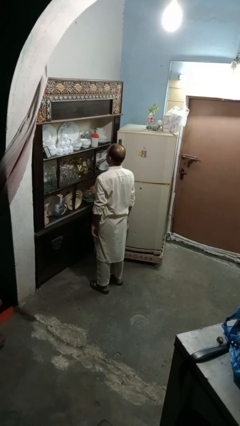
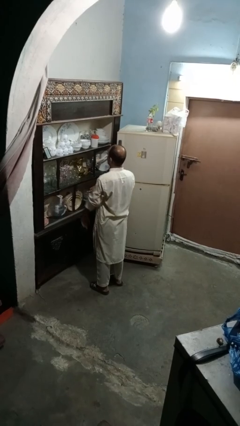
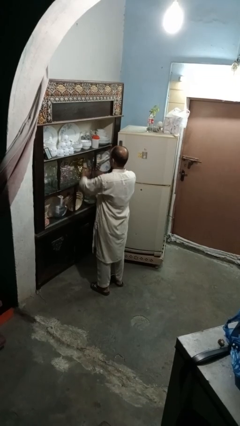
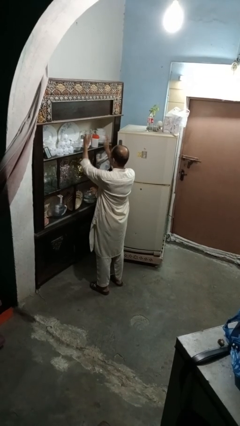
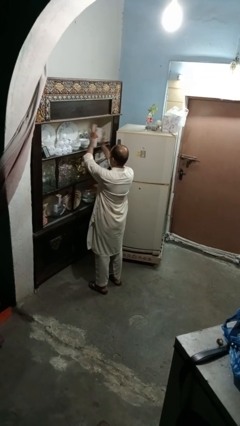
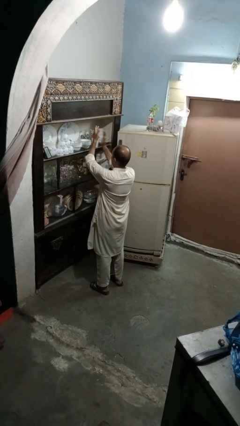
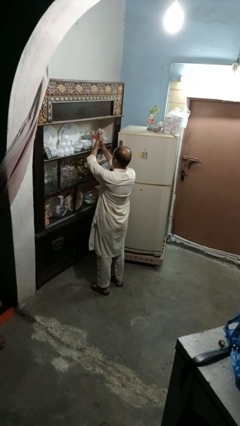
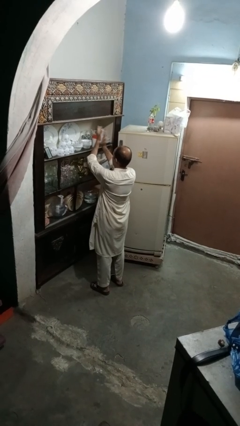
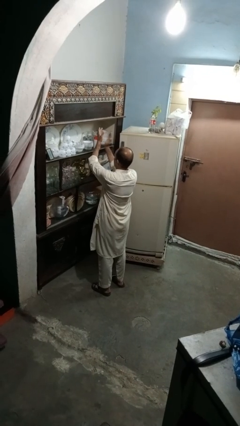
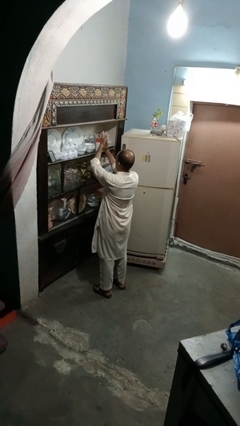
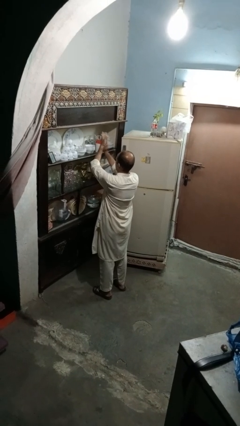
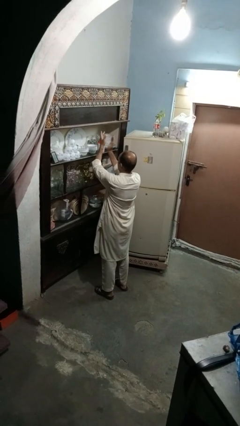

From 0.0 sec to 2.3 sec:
person claps hands

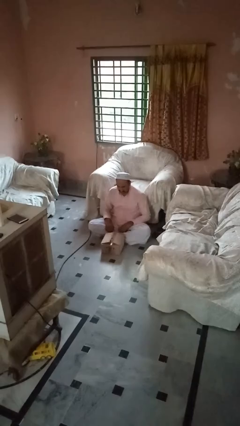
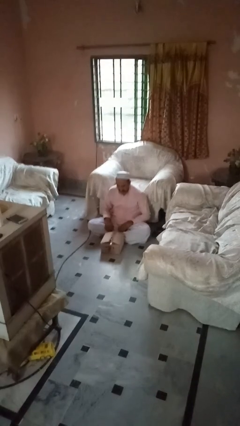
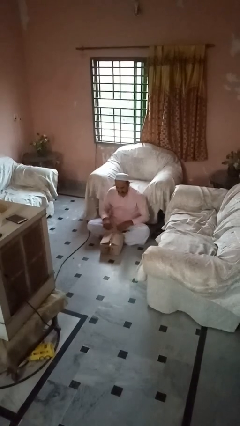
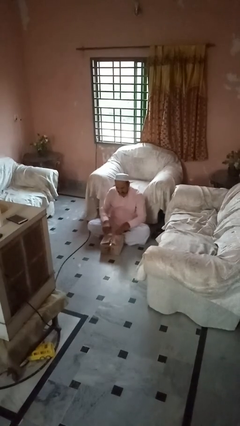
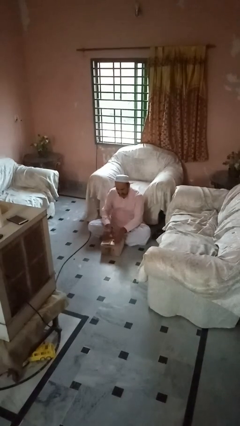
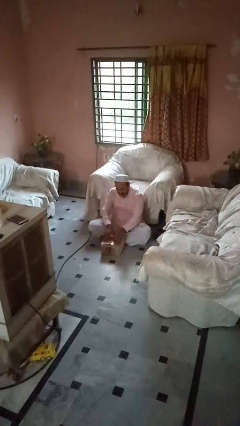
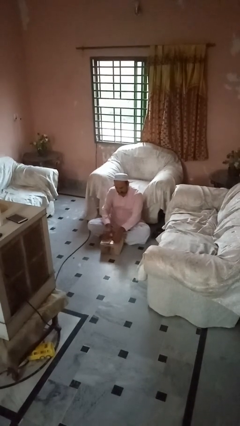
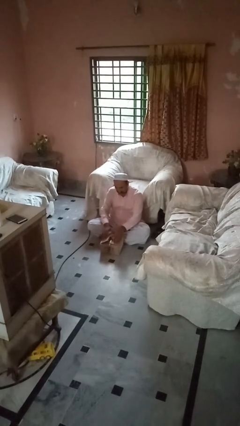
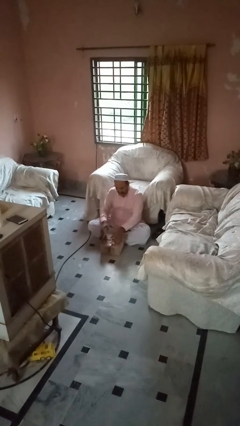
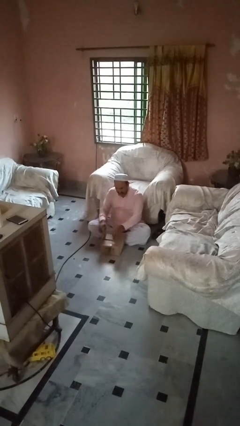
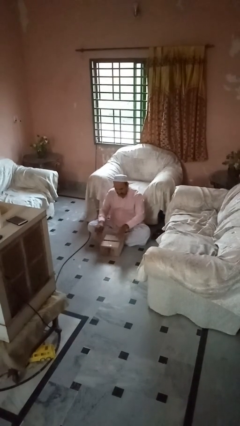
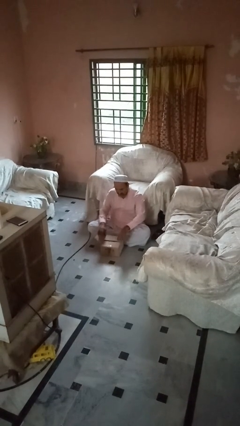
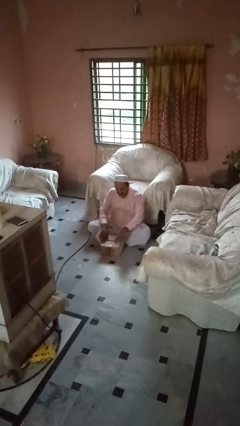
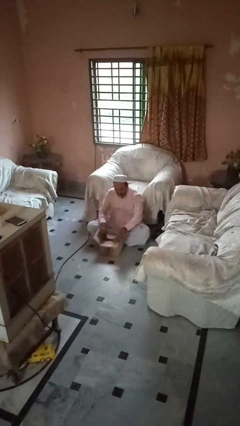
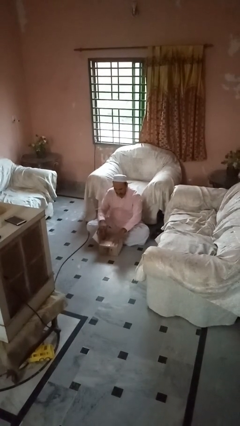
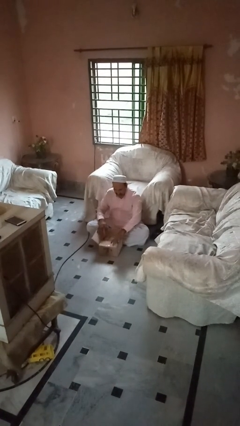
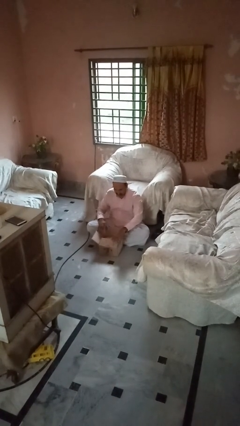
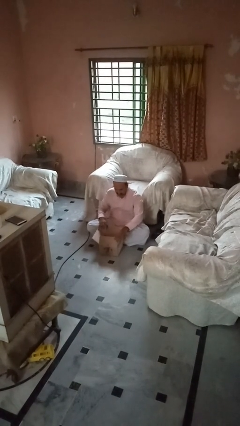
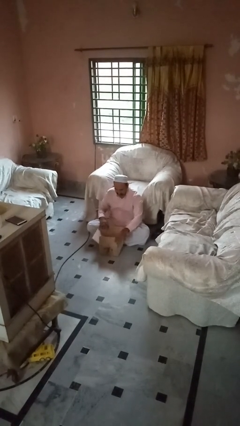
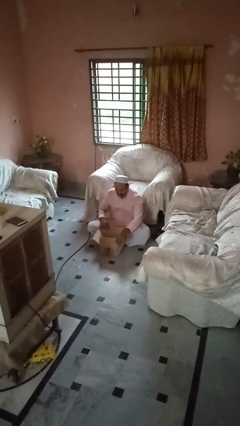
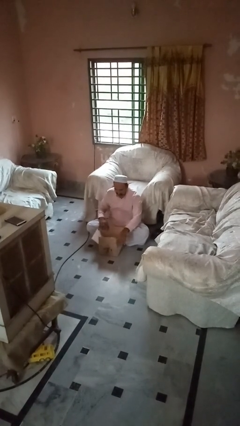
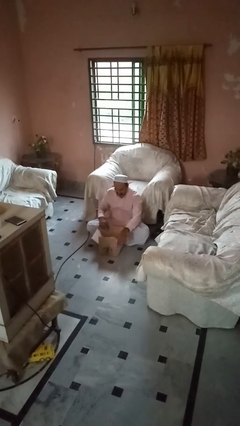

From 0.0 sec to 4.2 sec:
person opens box

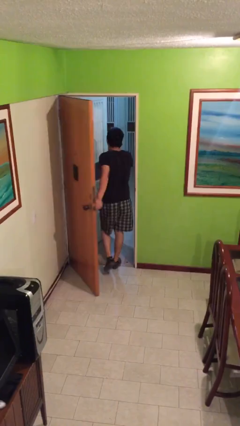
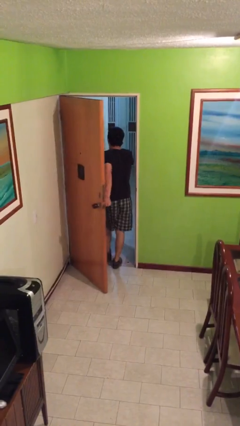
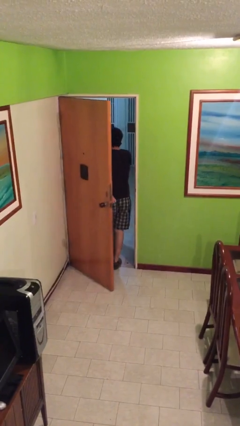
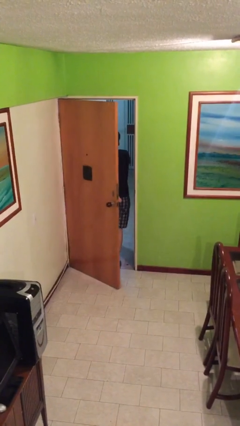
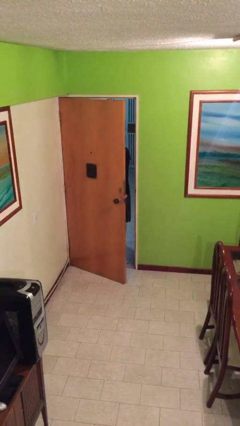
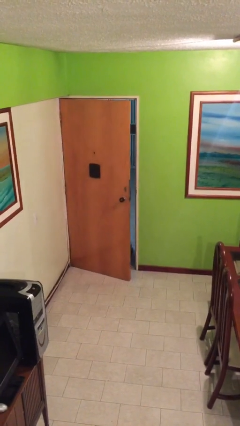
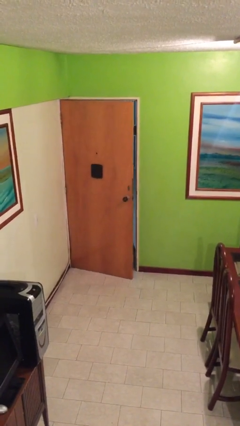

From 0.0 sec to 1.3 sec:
person closes facility door

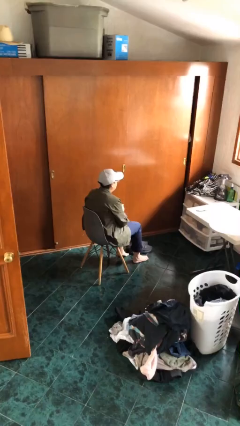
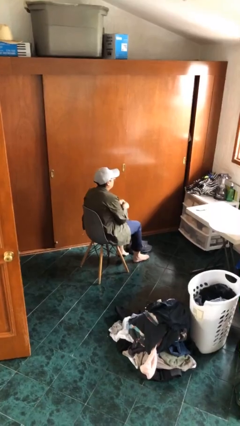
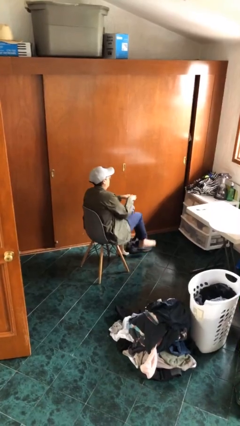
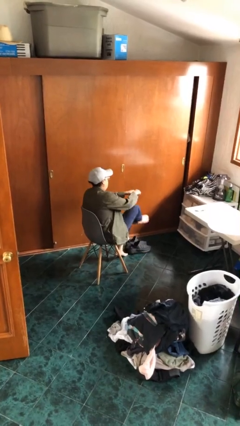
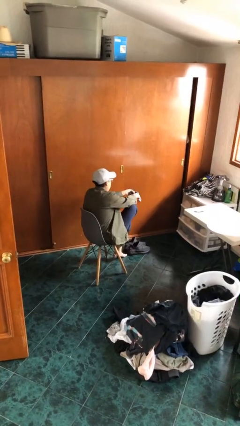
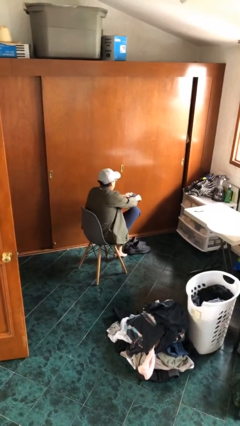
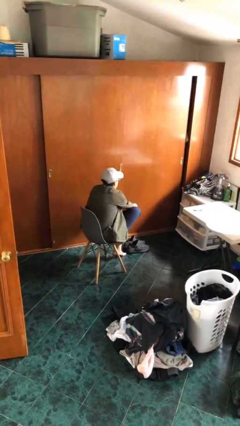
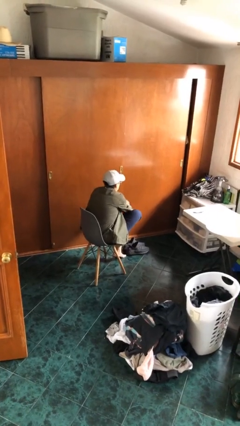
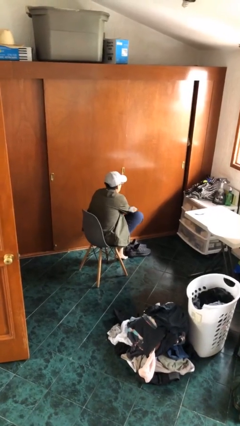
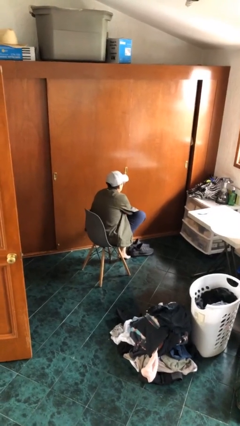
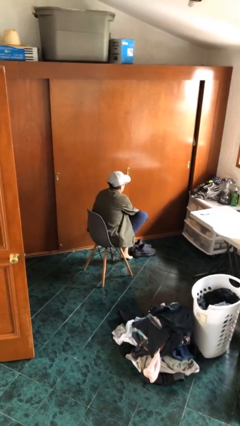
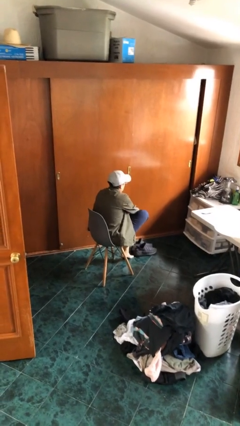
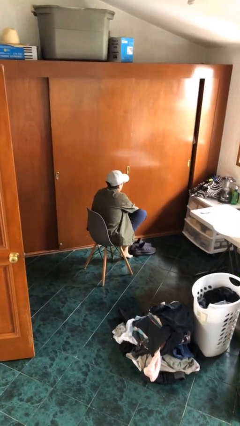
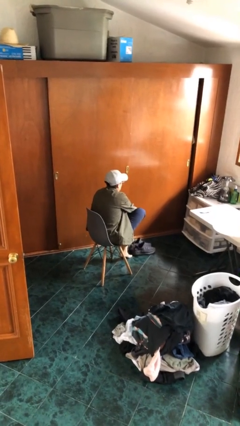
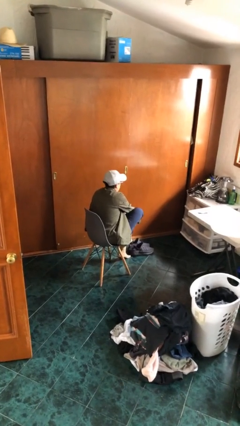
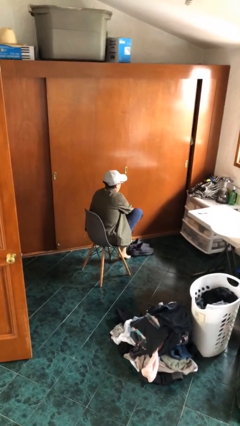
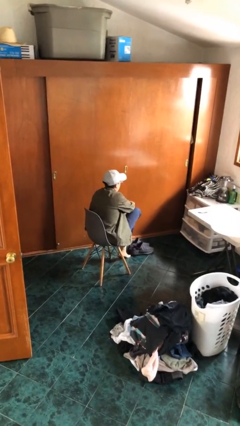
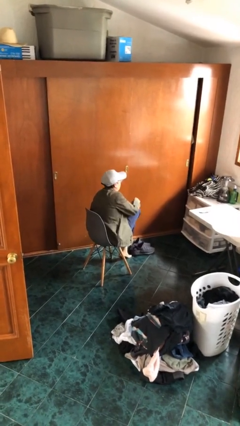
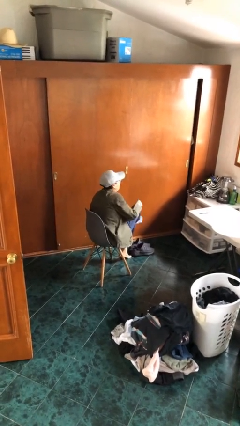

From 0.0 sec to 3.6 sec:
person puts on socks

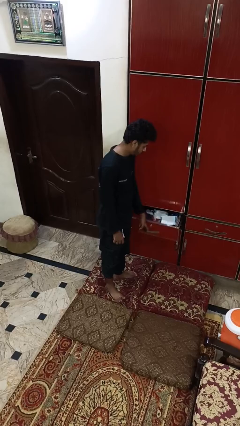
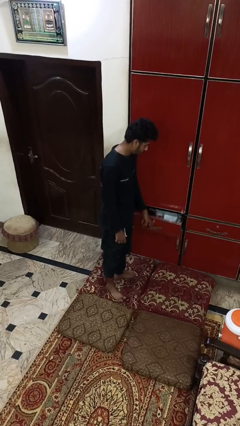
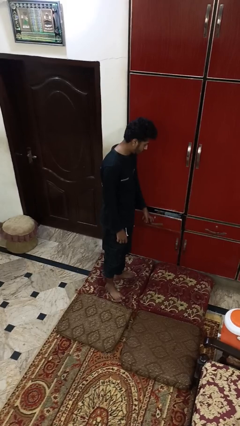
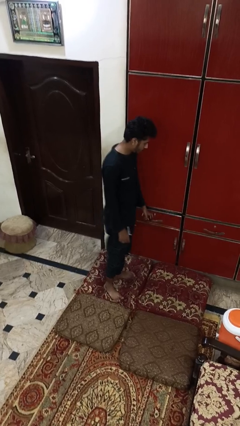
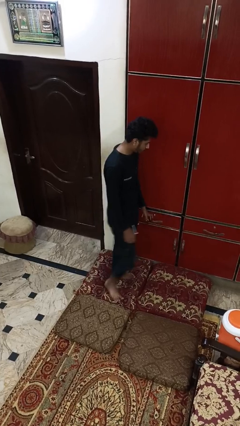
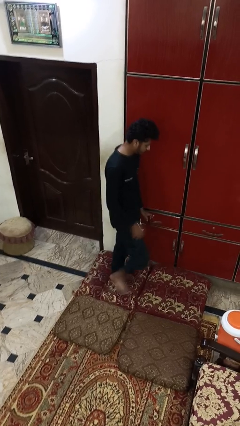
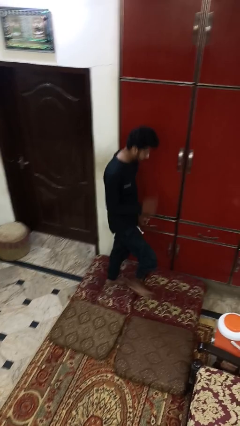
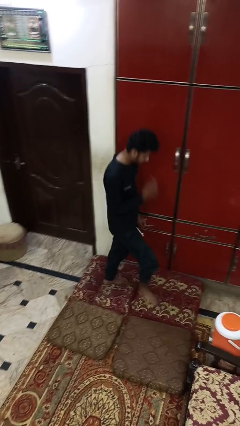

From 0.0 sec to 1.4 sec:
person closes dresser drawer

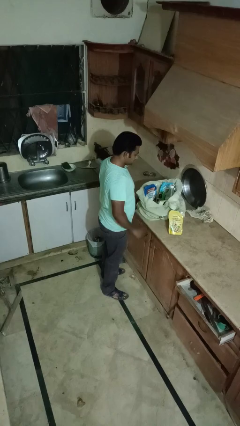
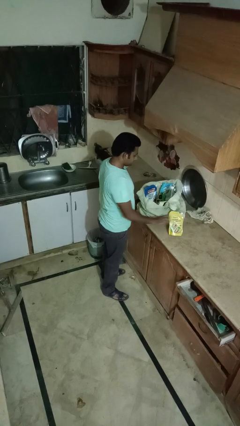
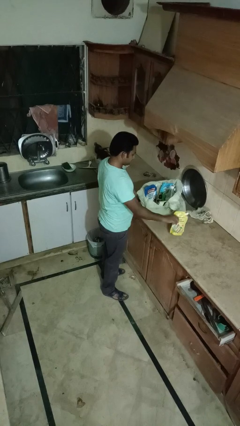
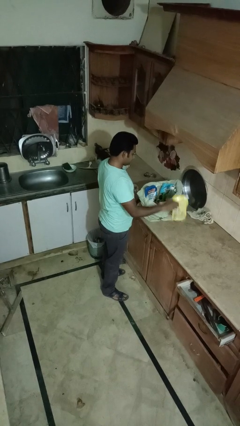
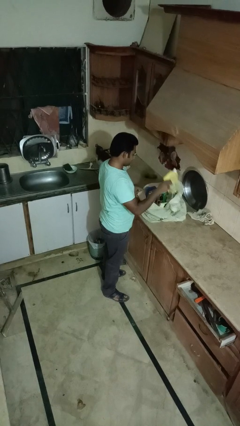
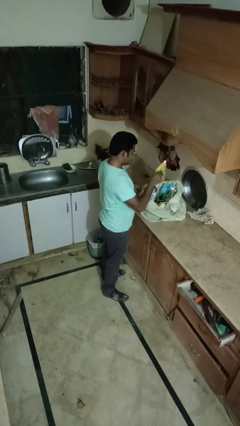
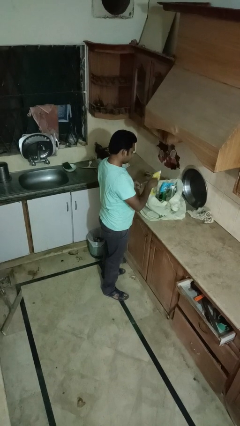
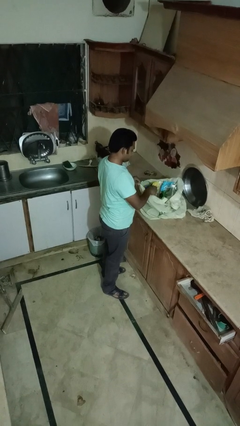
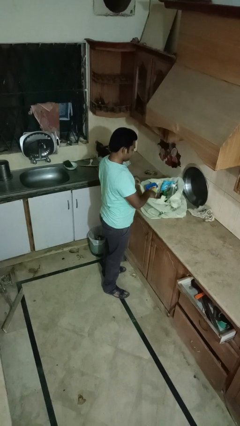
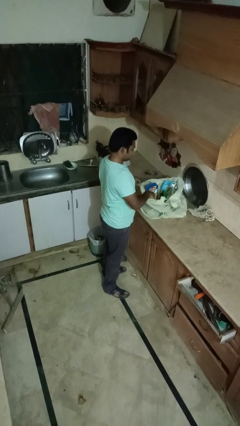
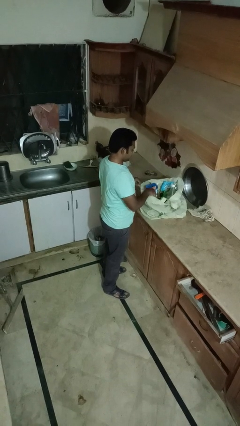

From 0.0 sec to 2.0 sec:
person puts object into bag

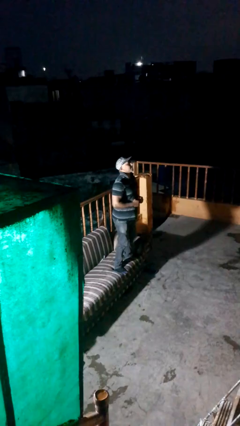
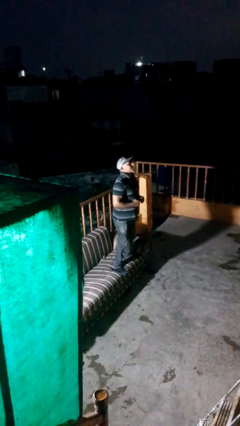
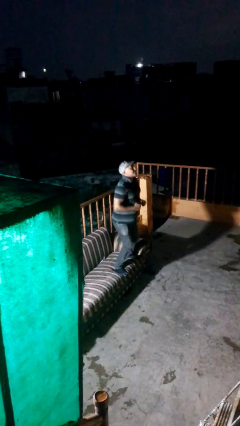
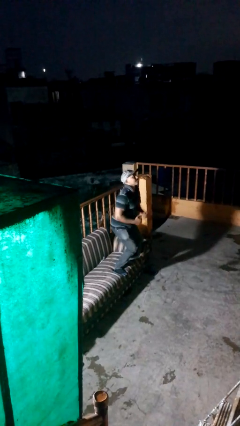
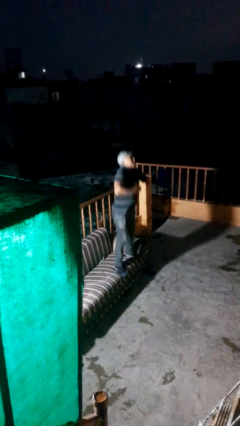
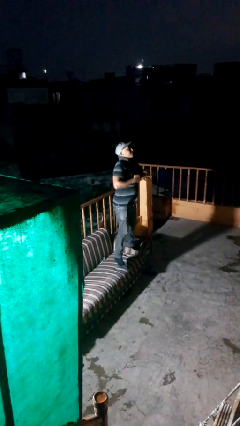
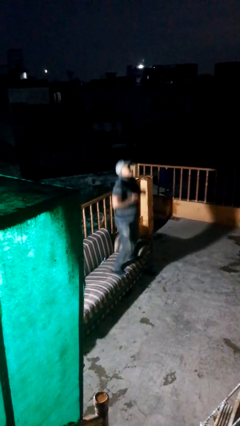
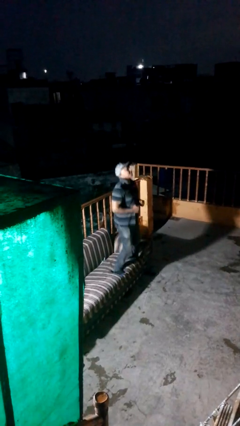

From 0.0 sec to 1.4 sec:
person jumps on couch

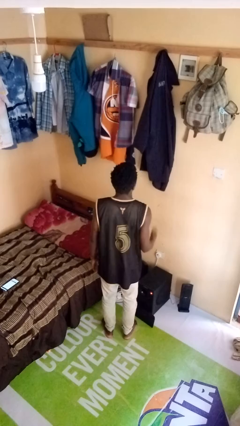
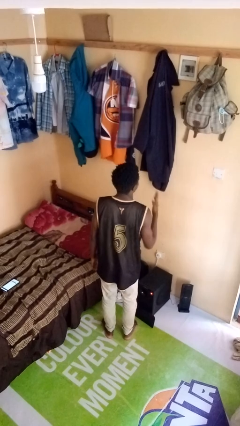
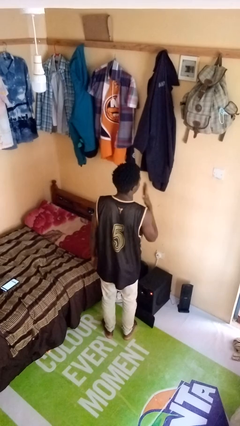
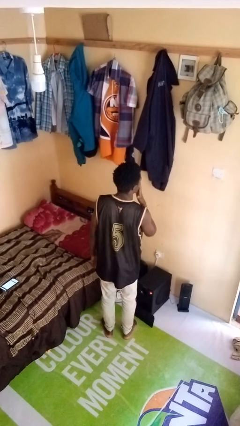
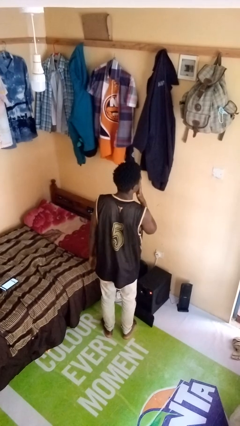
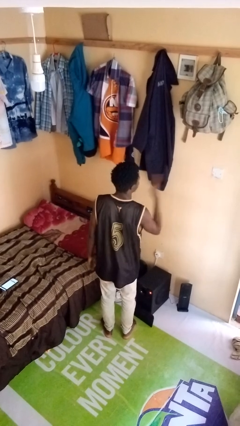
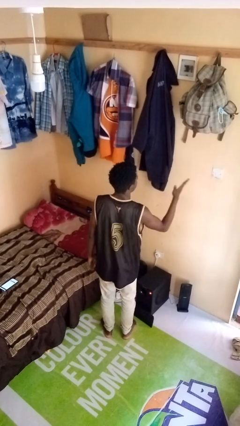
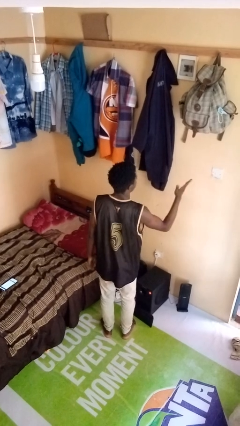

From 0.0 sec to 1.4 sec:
person gestures blow kiss
